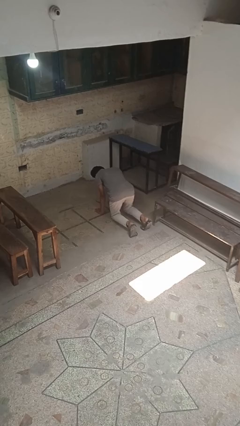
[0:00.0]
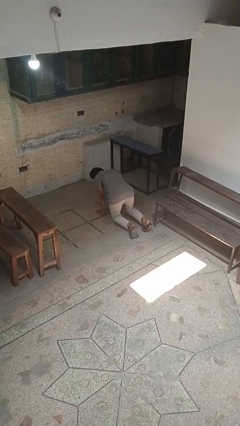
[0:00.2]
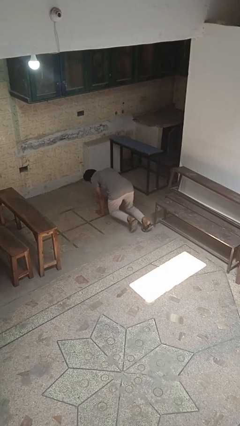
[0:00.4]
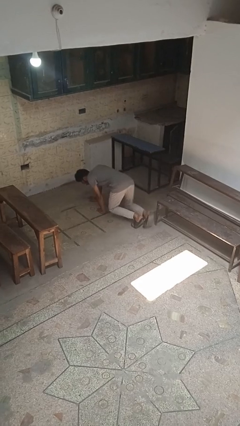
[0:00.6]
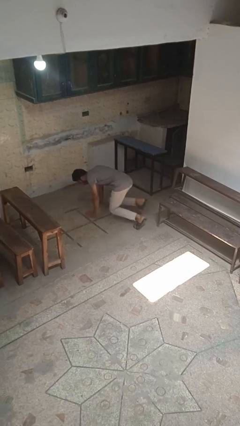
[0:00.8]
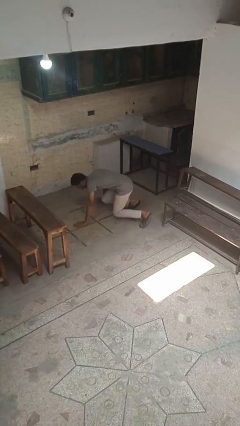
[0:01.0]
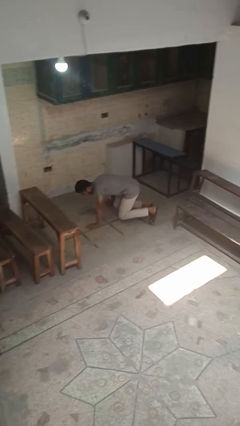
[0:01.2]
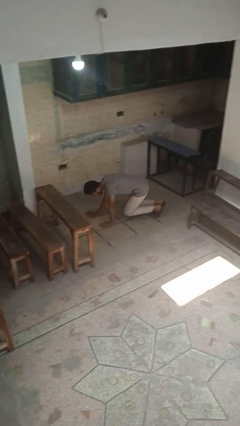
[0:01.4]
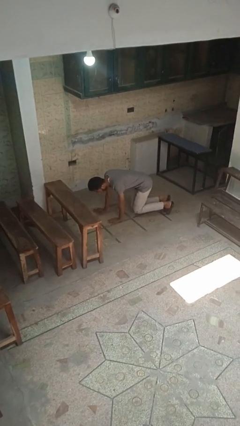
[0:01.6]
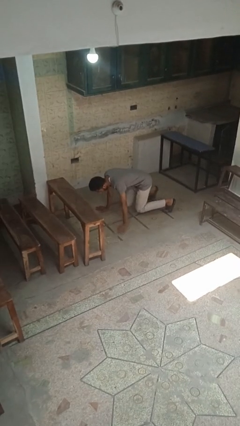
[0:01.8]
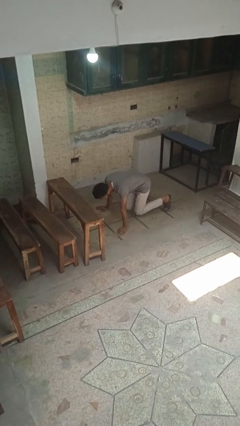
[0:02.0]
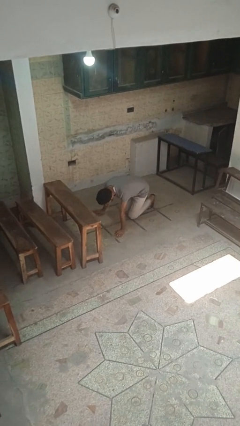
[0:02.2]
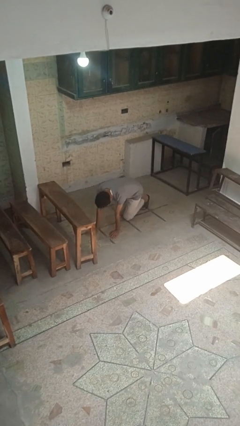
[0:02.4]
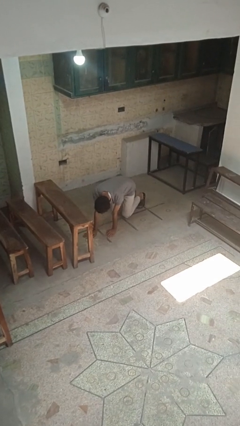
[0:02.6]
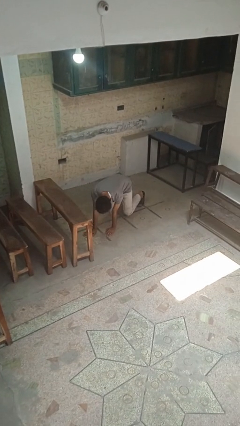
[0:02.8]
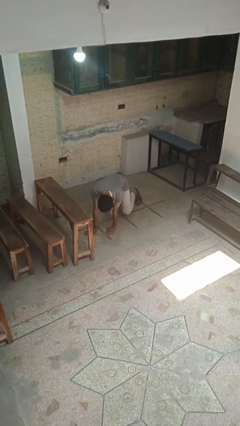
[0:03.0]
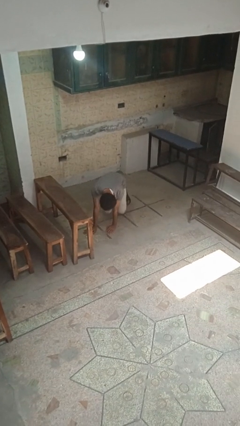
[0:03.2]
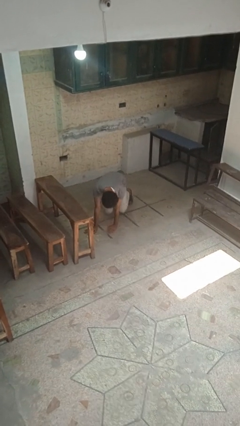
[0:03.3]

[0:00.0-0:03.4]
person crawls

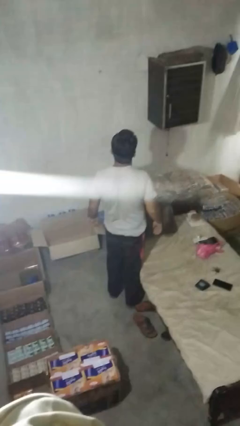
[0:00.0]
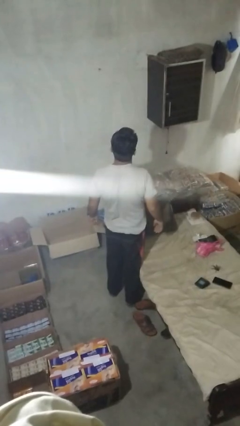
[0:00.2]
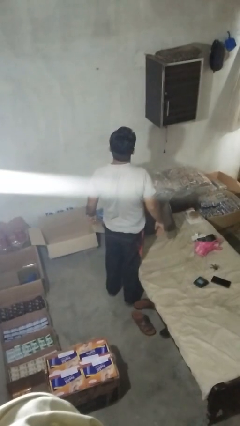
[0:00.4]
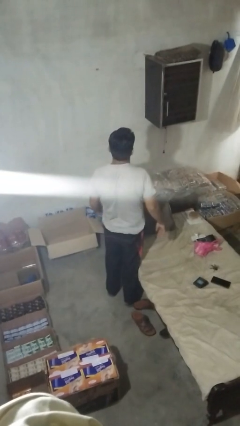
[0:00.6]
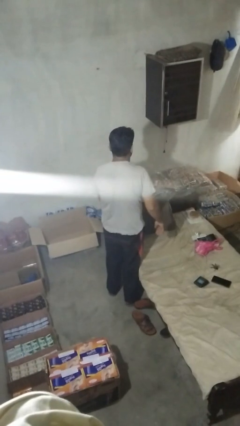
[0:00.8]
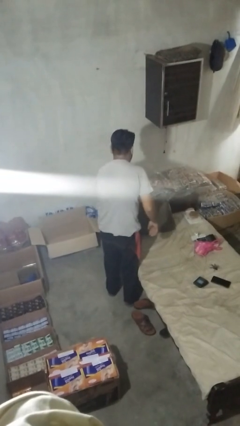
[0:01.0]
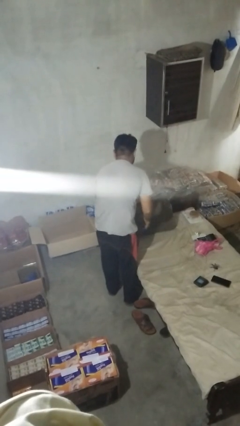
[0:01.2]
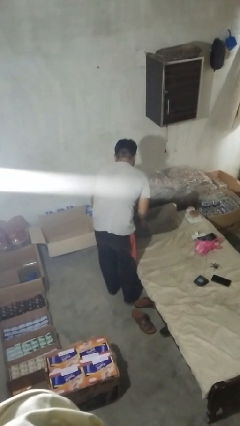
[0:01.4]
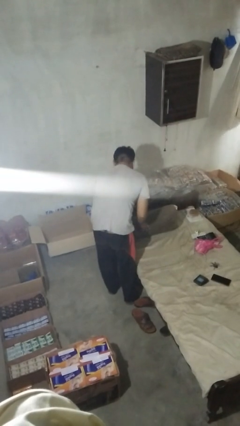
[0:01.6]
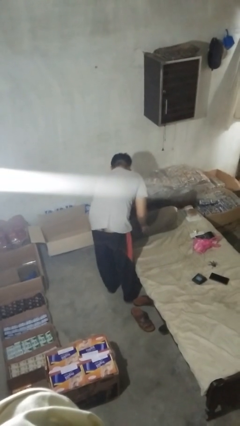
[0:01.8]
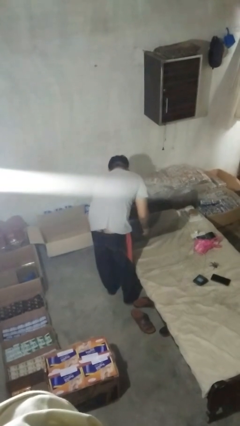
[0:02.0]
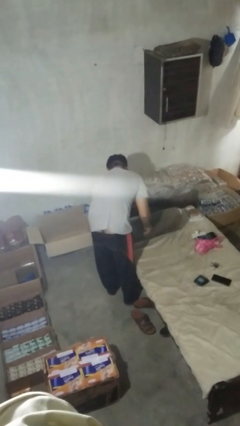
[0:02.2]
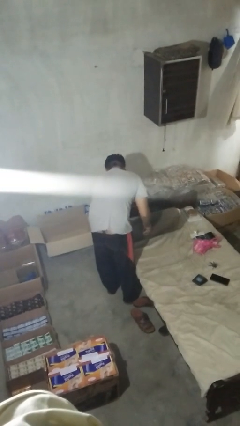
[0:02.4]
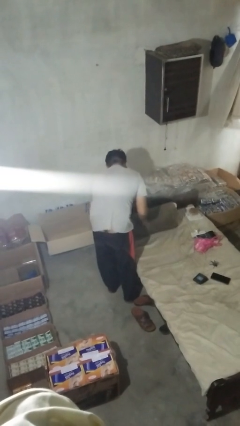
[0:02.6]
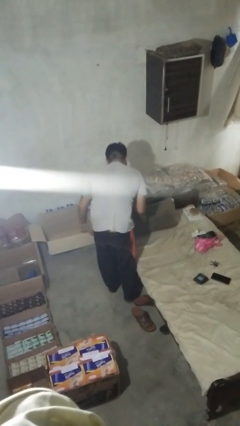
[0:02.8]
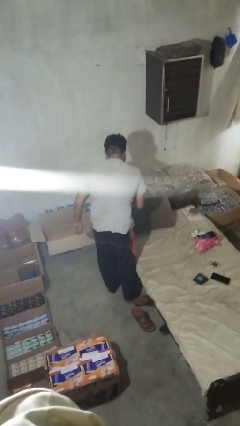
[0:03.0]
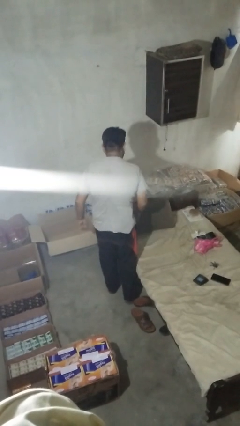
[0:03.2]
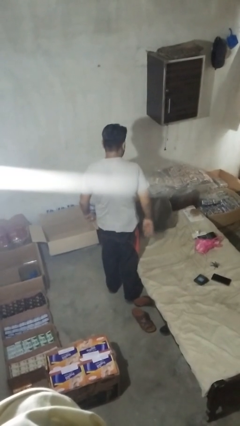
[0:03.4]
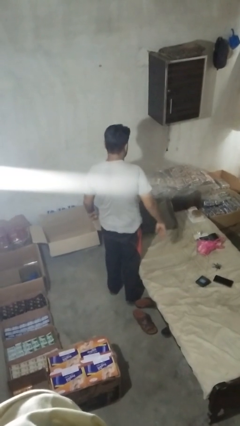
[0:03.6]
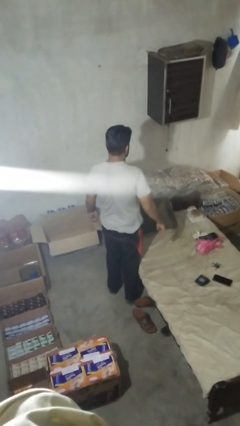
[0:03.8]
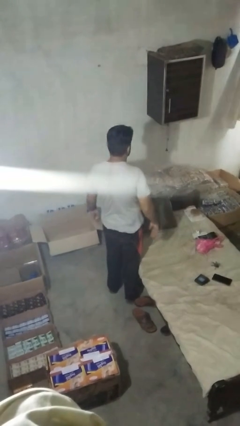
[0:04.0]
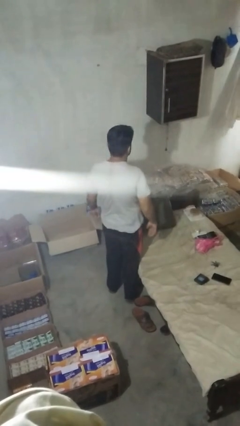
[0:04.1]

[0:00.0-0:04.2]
person searches in couch

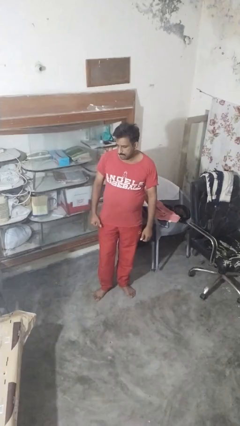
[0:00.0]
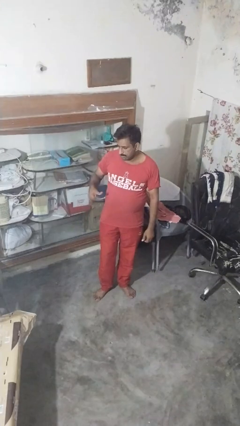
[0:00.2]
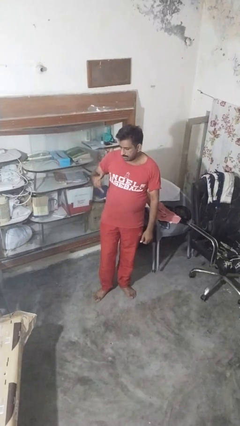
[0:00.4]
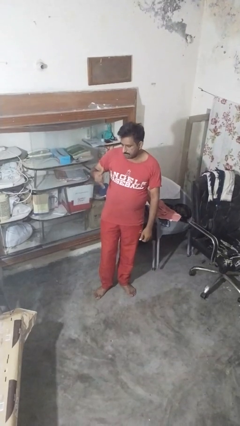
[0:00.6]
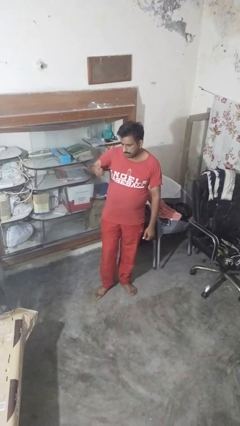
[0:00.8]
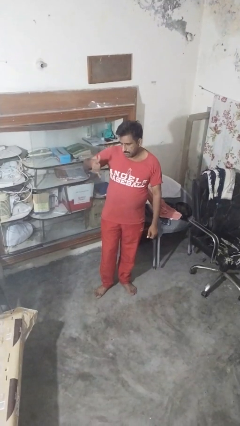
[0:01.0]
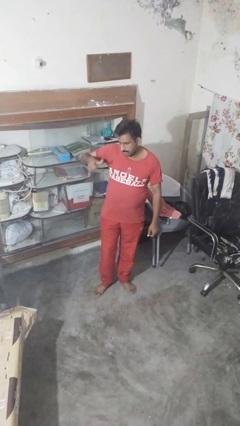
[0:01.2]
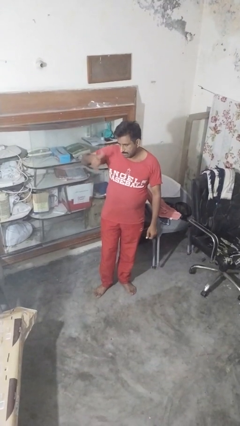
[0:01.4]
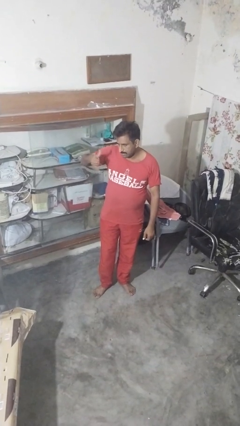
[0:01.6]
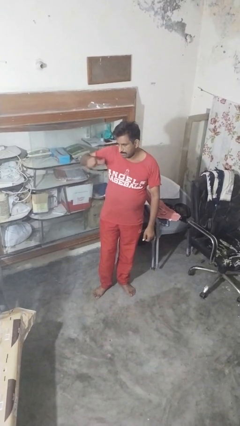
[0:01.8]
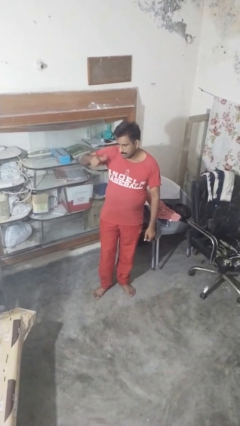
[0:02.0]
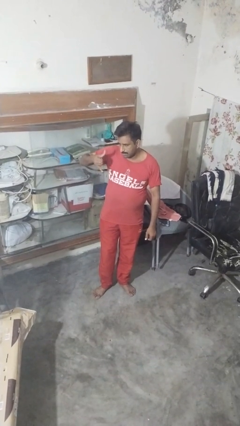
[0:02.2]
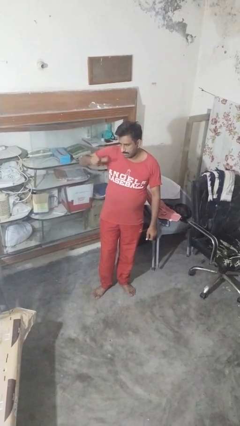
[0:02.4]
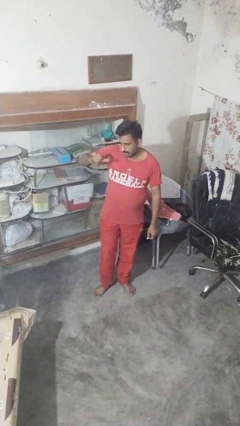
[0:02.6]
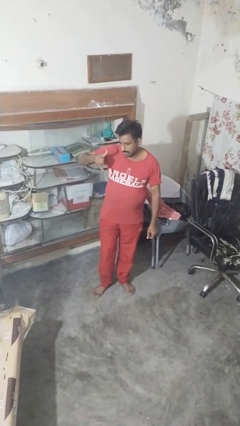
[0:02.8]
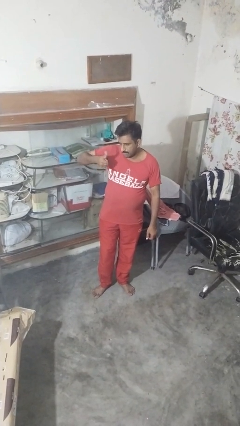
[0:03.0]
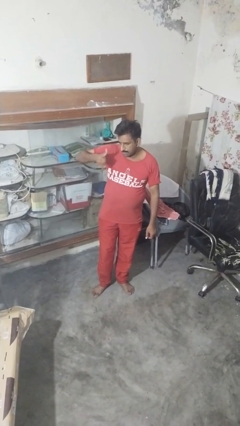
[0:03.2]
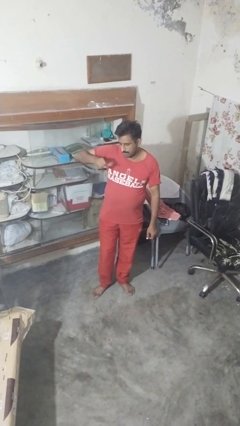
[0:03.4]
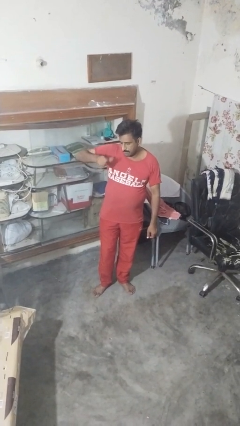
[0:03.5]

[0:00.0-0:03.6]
person gestures hang loose

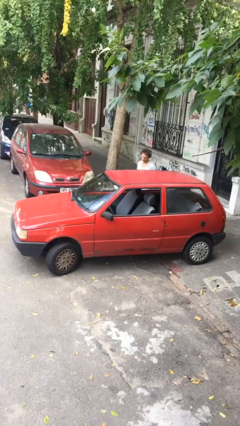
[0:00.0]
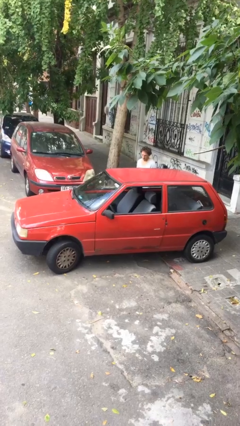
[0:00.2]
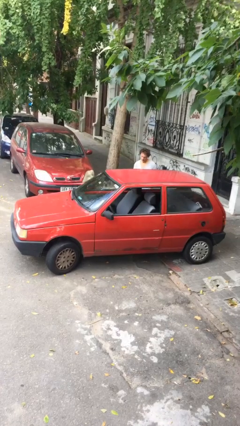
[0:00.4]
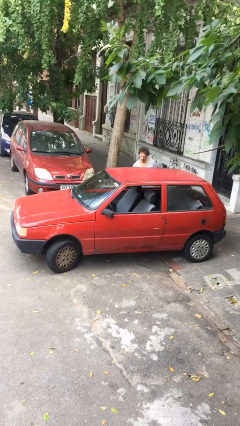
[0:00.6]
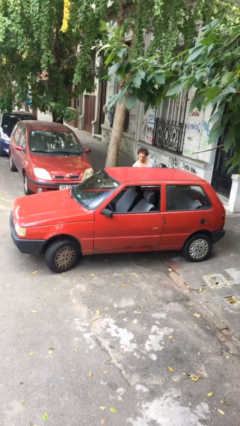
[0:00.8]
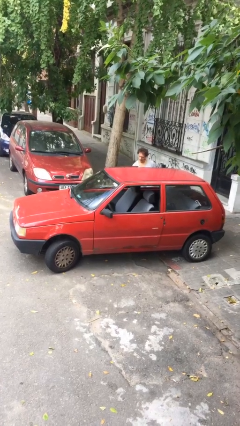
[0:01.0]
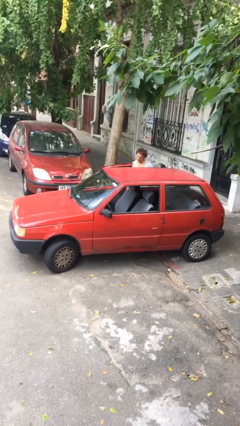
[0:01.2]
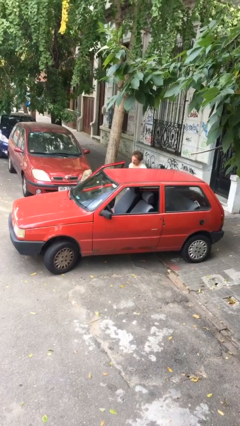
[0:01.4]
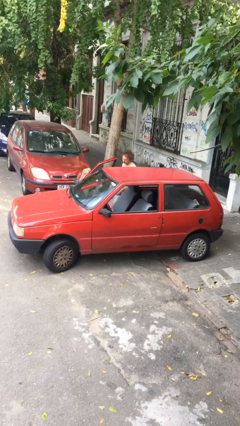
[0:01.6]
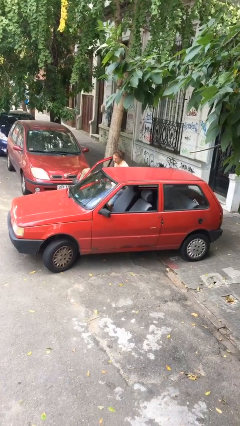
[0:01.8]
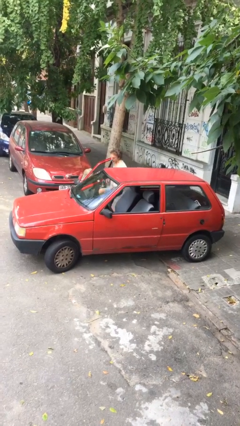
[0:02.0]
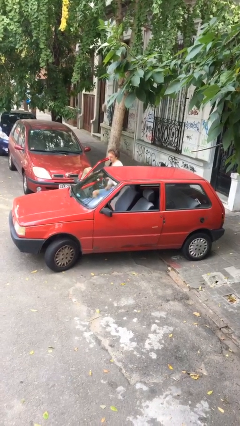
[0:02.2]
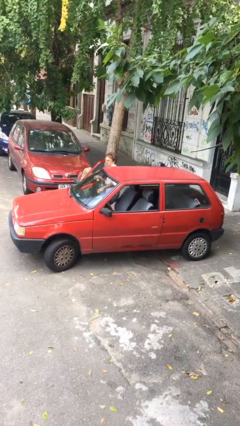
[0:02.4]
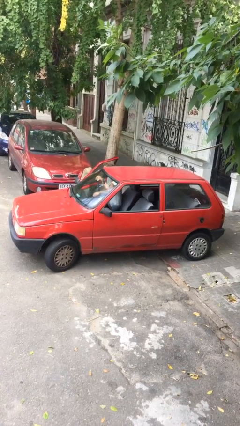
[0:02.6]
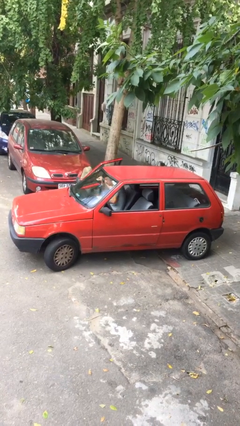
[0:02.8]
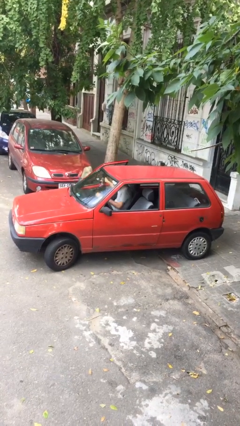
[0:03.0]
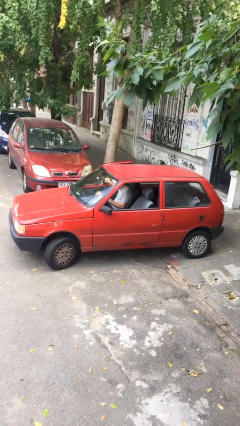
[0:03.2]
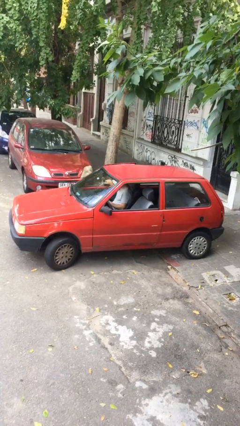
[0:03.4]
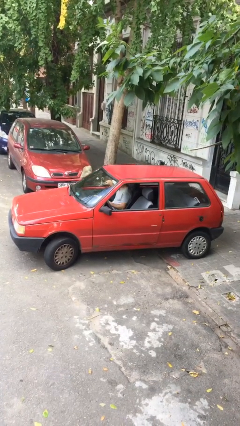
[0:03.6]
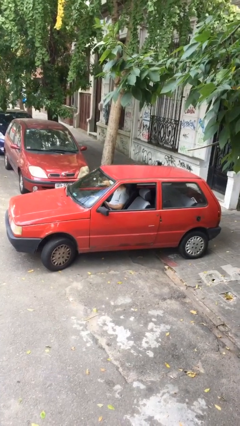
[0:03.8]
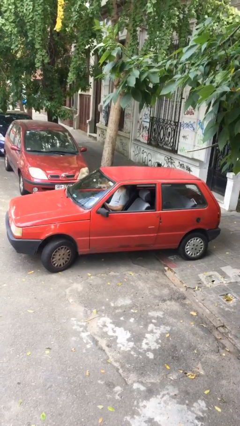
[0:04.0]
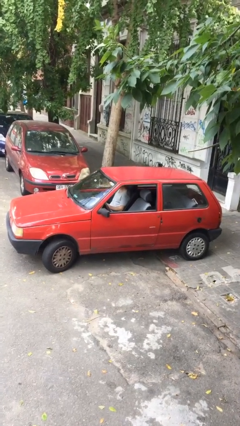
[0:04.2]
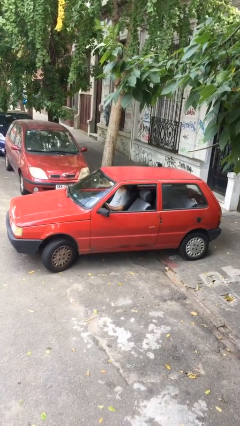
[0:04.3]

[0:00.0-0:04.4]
car picks up person

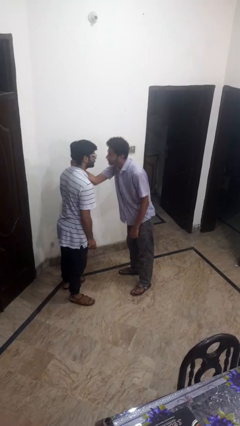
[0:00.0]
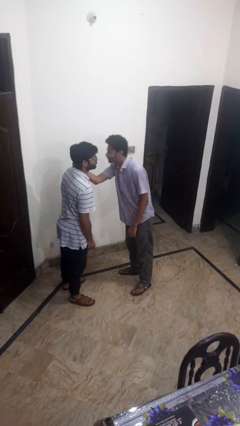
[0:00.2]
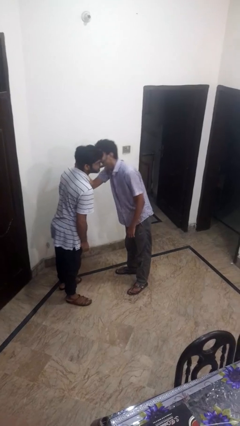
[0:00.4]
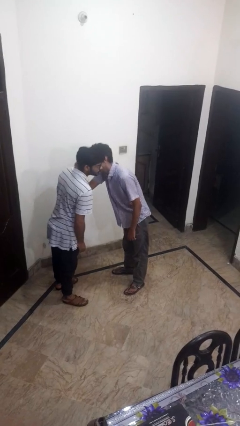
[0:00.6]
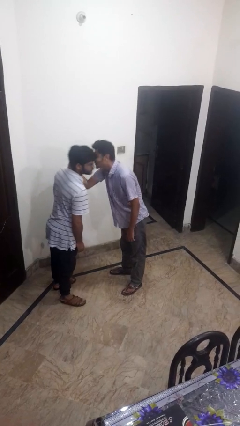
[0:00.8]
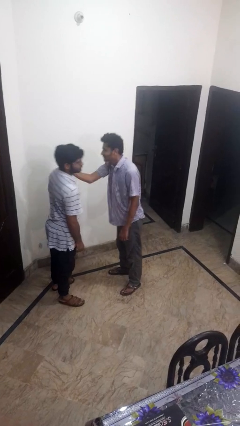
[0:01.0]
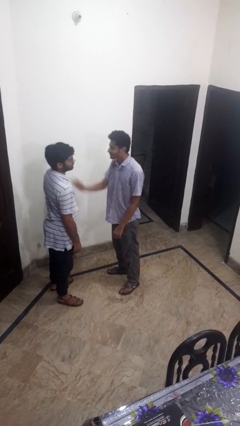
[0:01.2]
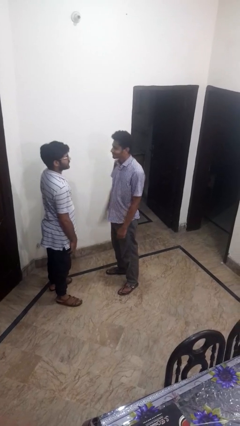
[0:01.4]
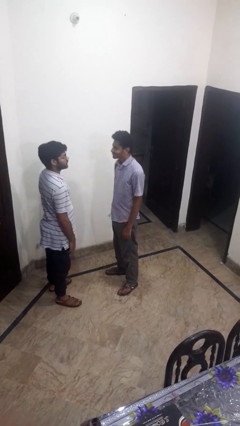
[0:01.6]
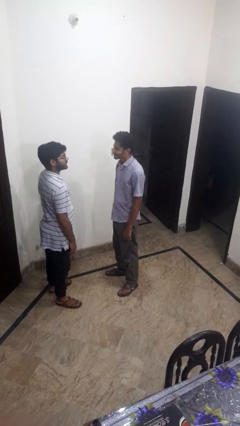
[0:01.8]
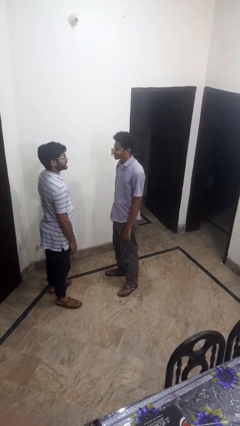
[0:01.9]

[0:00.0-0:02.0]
person grabs person by forearm

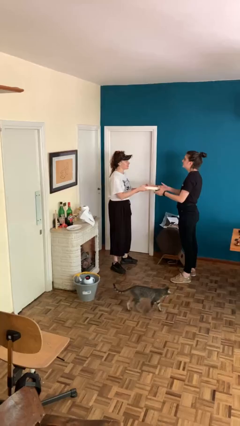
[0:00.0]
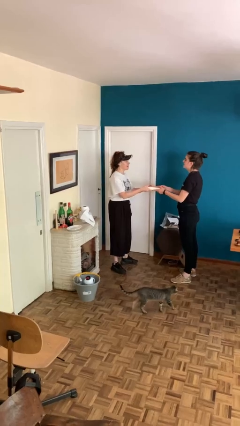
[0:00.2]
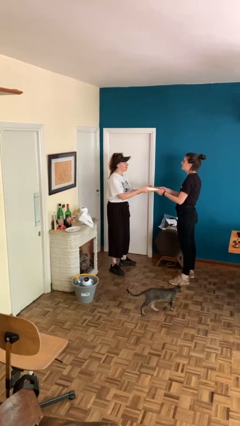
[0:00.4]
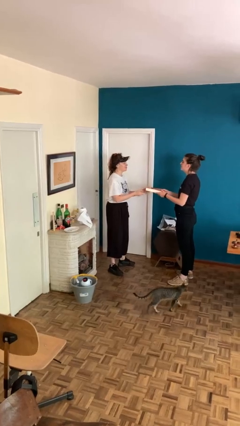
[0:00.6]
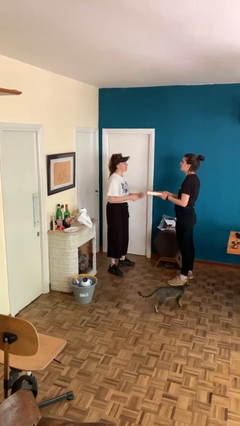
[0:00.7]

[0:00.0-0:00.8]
person transfers object to person
